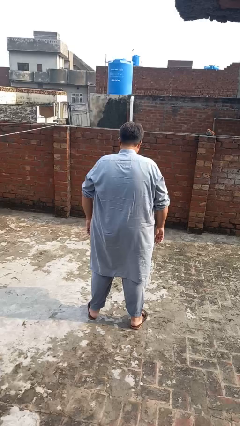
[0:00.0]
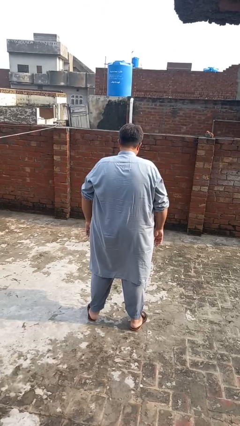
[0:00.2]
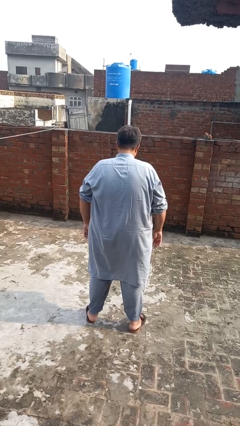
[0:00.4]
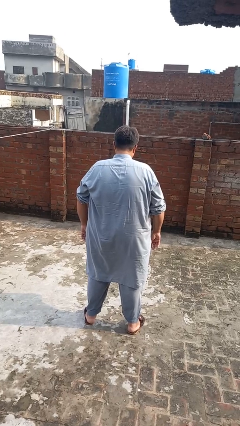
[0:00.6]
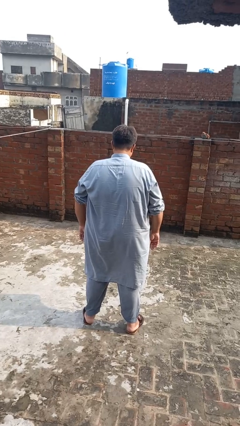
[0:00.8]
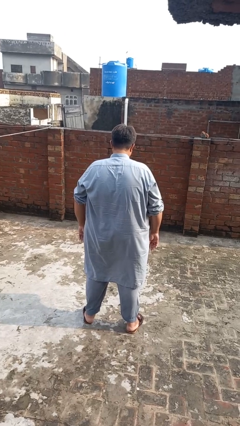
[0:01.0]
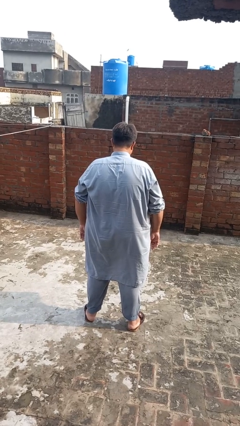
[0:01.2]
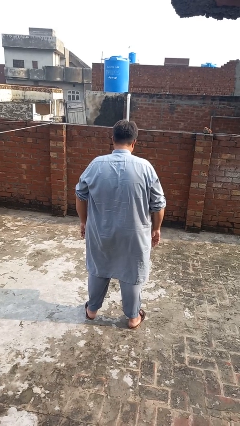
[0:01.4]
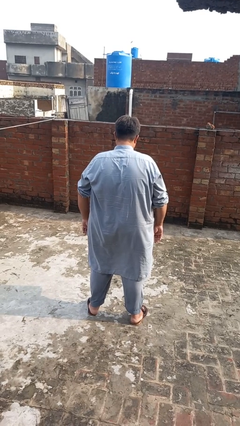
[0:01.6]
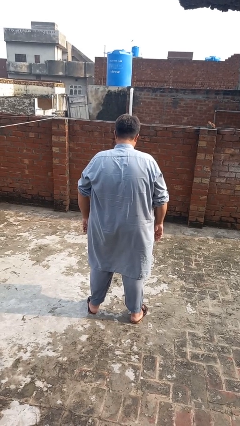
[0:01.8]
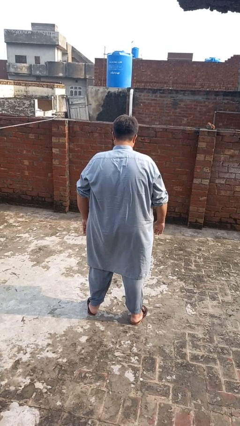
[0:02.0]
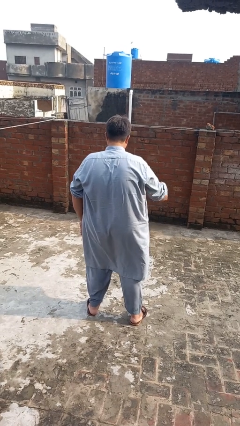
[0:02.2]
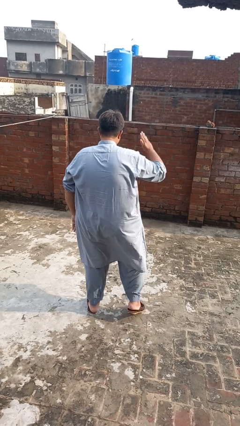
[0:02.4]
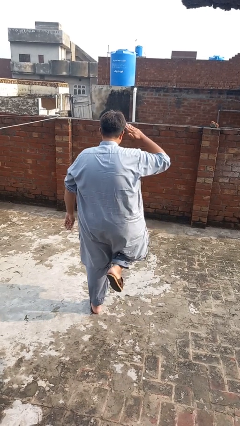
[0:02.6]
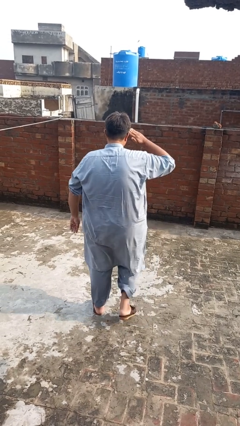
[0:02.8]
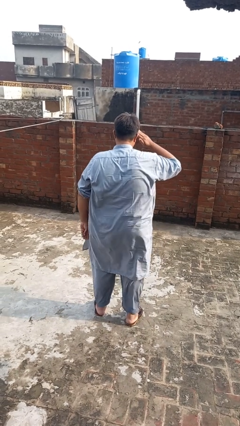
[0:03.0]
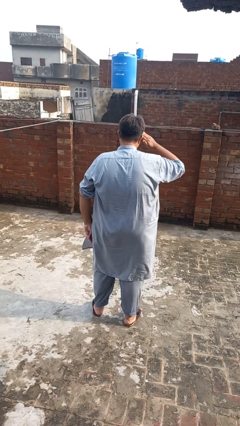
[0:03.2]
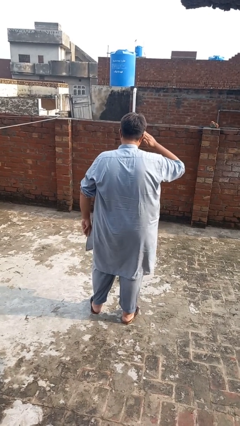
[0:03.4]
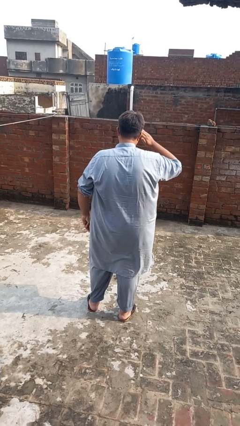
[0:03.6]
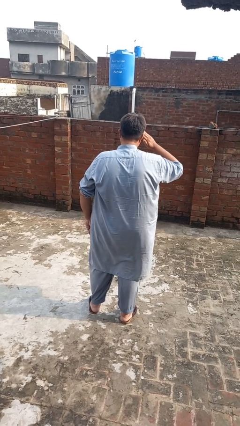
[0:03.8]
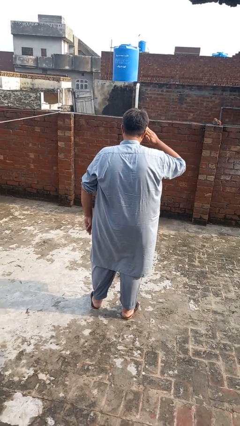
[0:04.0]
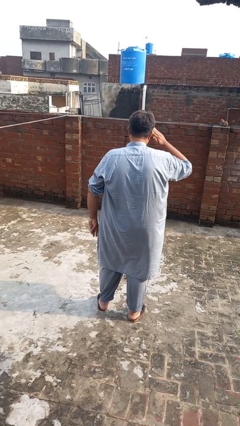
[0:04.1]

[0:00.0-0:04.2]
person salutes

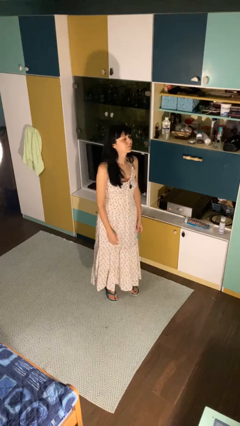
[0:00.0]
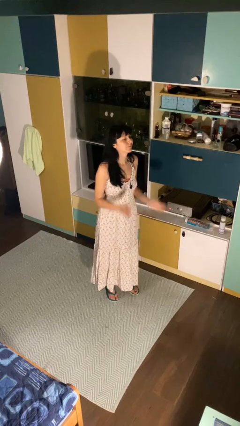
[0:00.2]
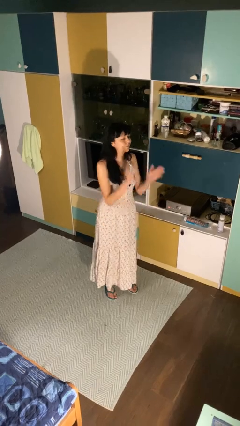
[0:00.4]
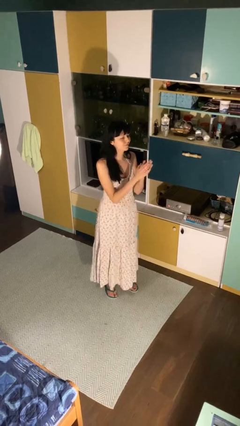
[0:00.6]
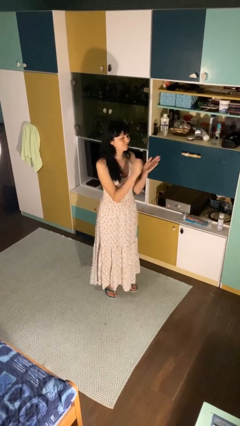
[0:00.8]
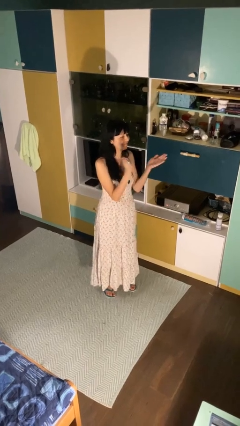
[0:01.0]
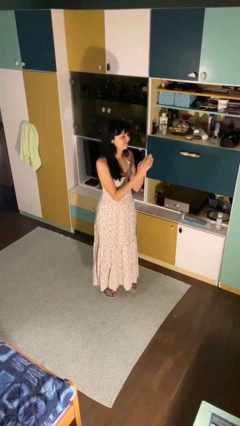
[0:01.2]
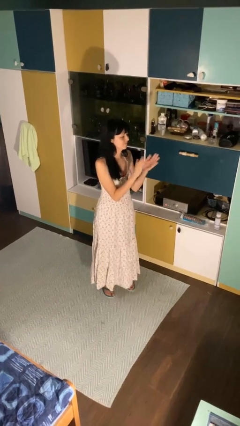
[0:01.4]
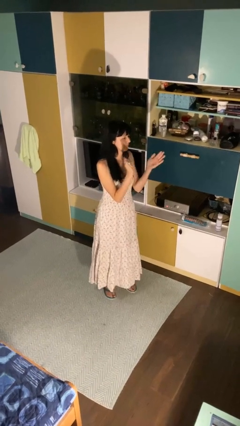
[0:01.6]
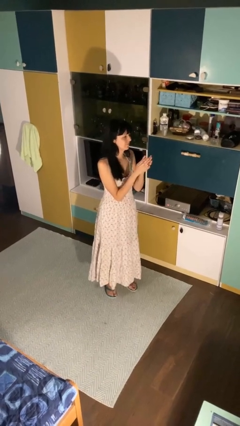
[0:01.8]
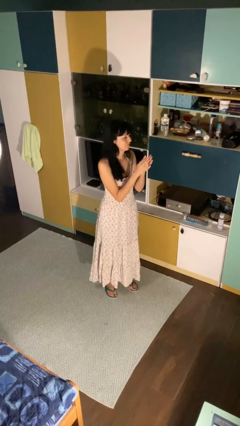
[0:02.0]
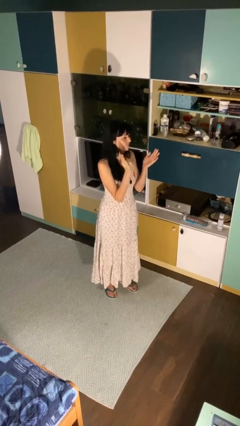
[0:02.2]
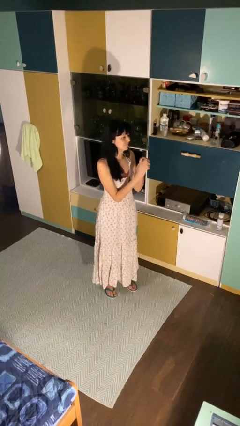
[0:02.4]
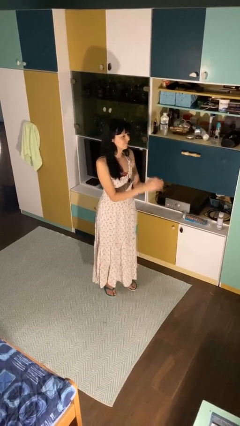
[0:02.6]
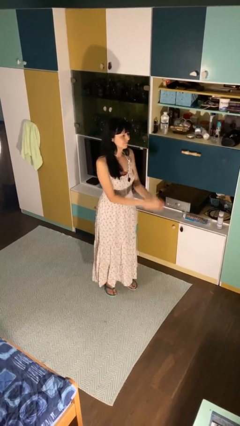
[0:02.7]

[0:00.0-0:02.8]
person claps hands

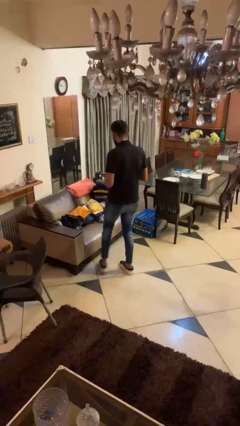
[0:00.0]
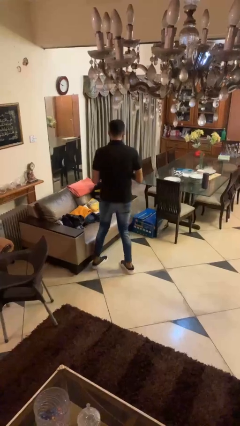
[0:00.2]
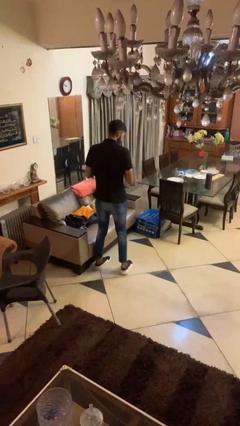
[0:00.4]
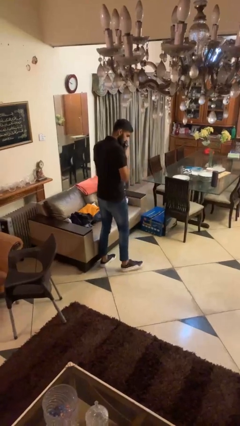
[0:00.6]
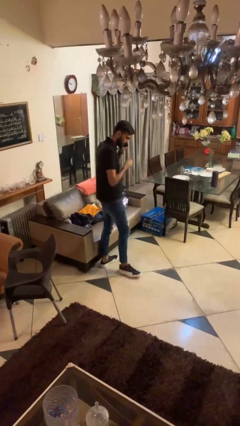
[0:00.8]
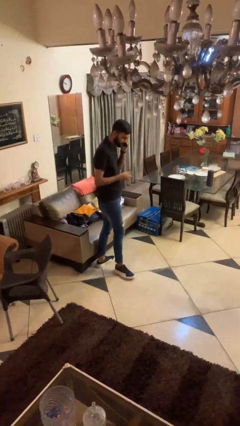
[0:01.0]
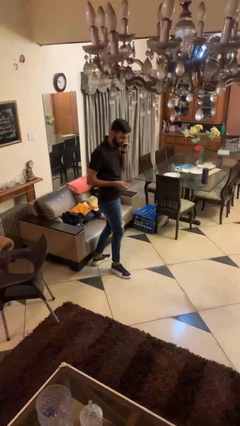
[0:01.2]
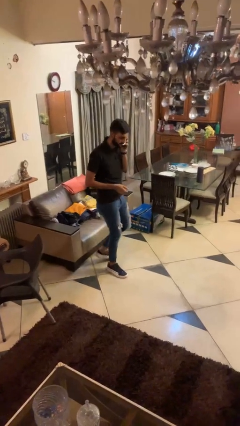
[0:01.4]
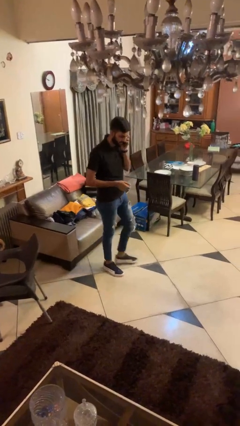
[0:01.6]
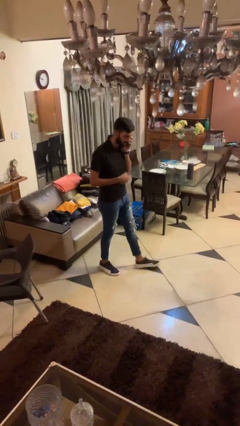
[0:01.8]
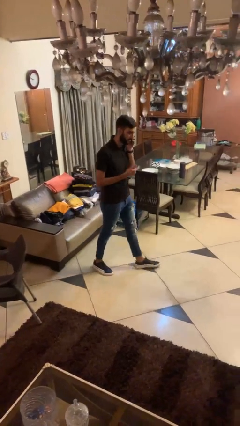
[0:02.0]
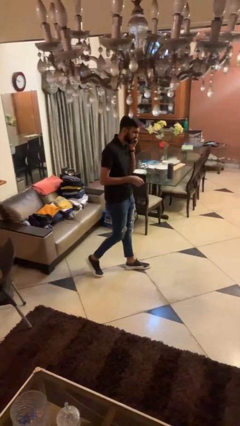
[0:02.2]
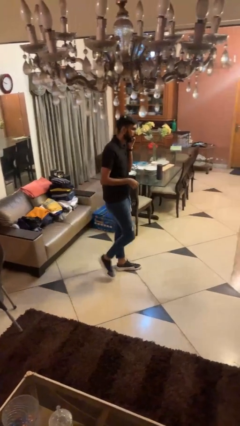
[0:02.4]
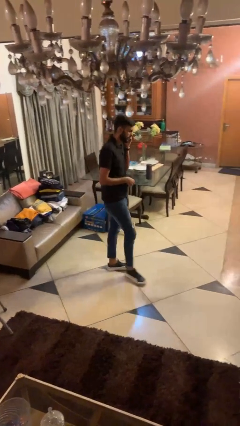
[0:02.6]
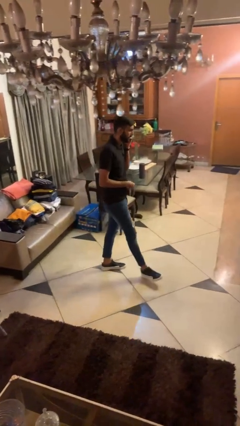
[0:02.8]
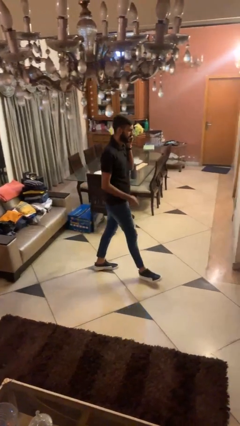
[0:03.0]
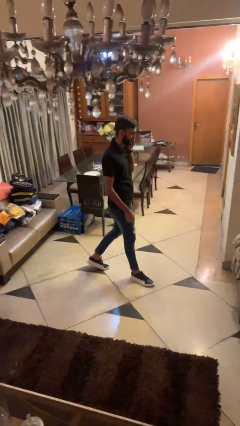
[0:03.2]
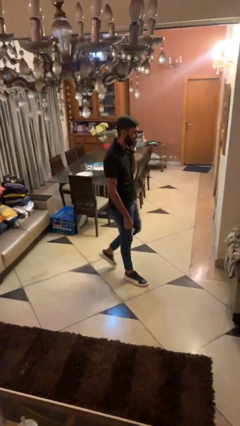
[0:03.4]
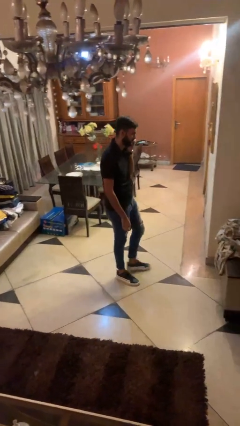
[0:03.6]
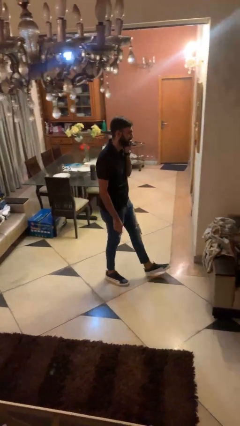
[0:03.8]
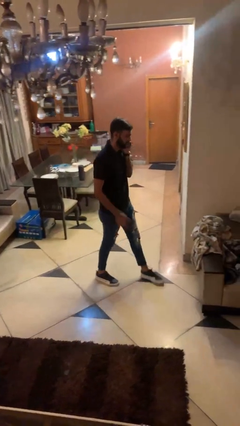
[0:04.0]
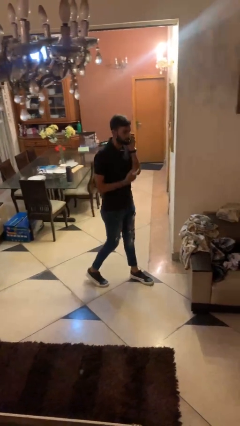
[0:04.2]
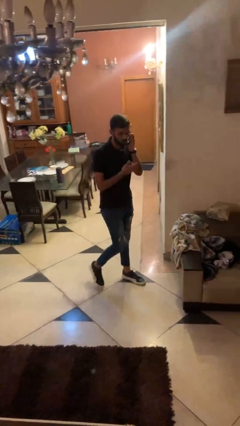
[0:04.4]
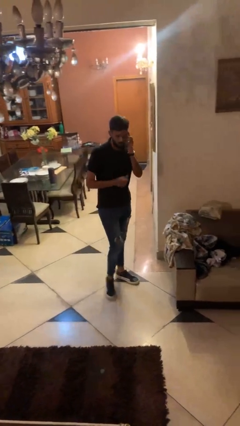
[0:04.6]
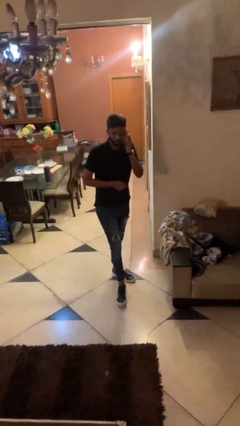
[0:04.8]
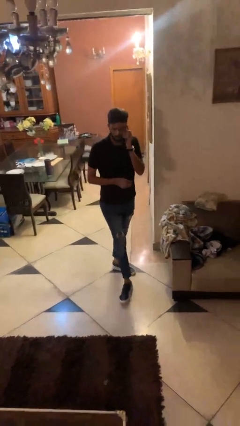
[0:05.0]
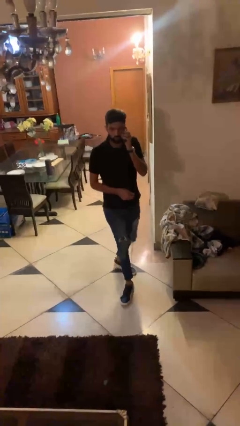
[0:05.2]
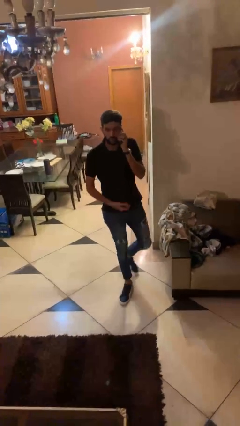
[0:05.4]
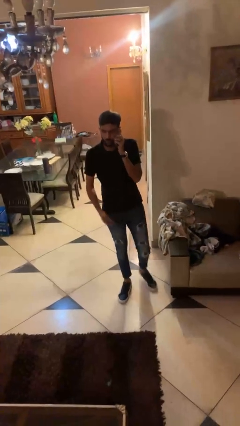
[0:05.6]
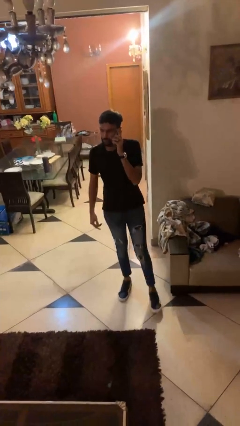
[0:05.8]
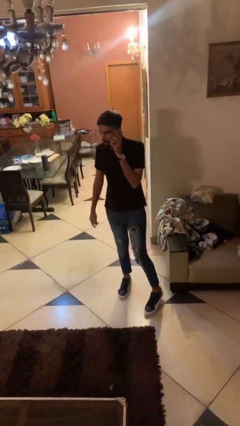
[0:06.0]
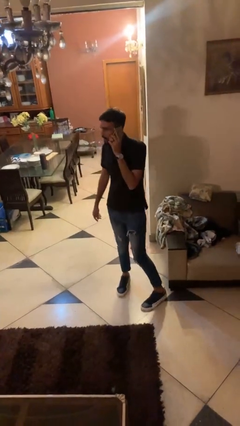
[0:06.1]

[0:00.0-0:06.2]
person talks on phone

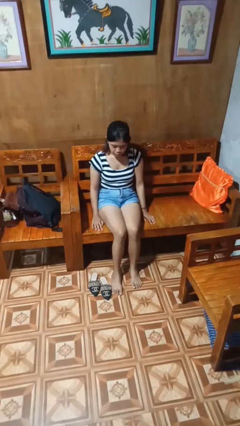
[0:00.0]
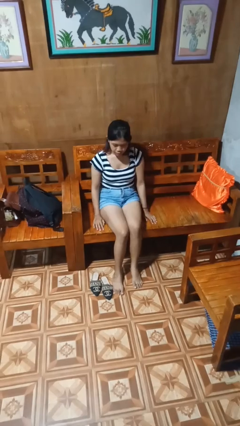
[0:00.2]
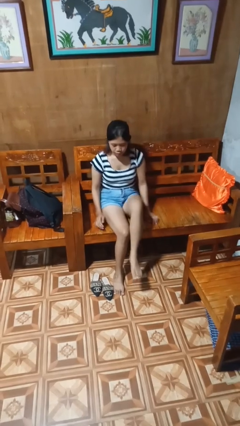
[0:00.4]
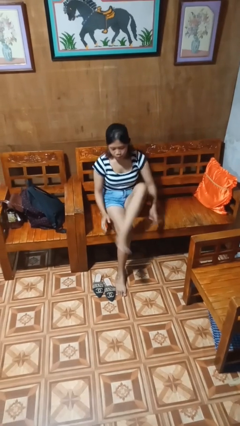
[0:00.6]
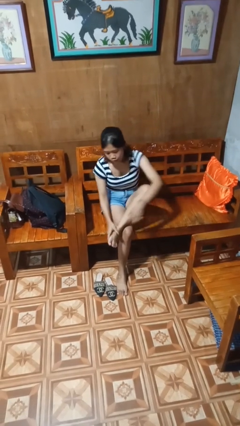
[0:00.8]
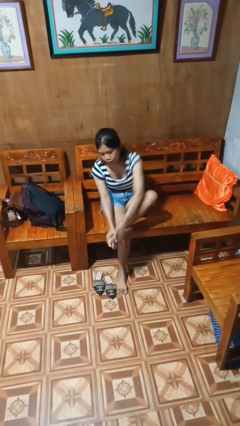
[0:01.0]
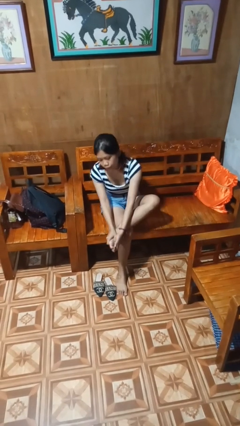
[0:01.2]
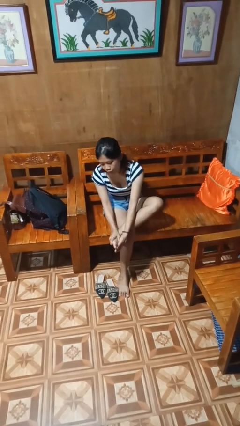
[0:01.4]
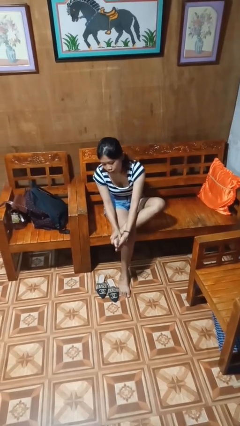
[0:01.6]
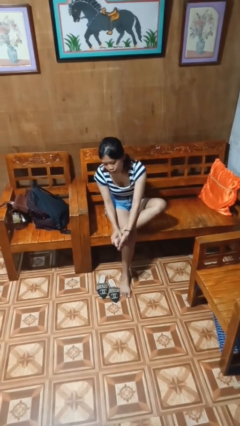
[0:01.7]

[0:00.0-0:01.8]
person rubs foot

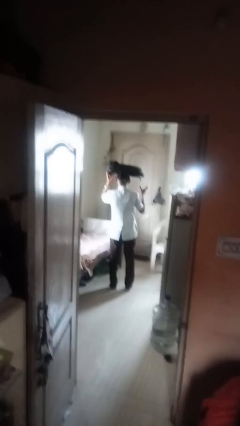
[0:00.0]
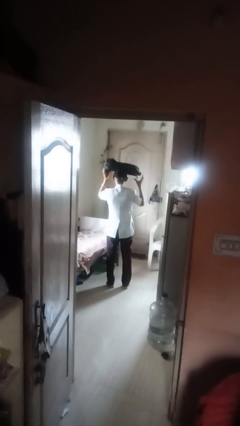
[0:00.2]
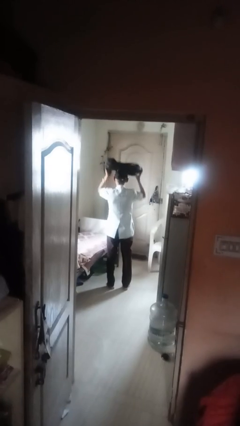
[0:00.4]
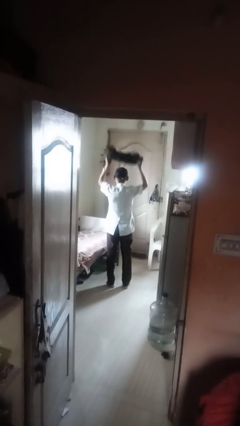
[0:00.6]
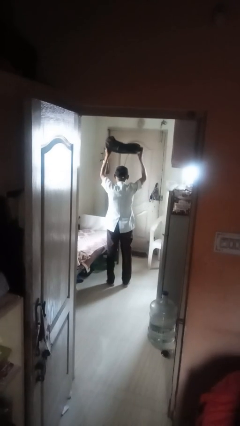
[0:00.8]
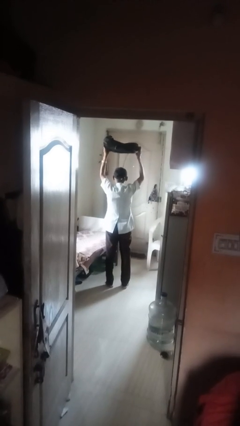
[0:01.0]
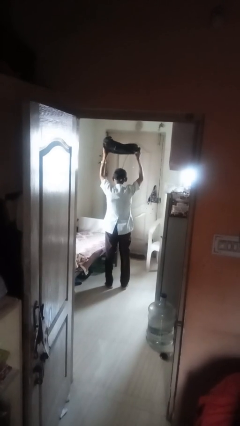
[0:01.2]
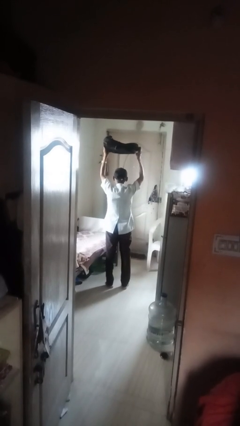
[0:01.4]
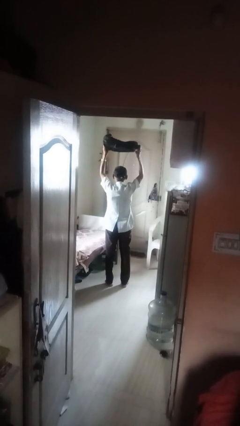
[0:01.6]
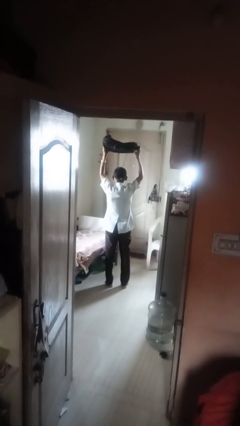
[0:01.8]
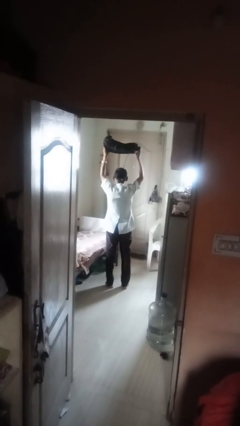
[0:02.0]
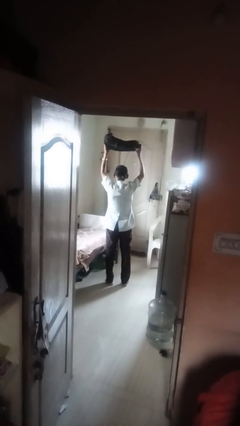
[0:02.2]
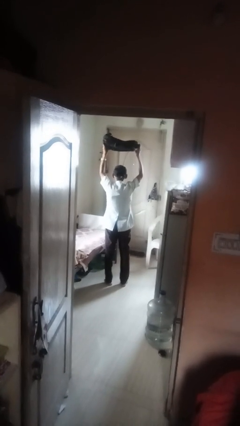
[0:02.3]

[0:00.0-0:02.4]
person holds object above head

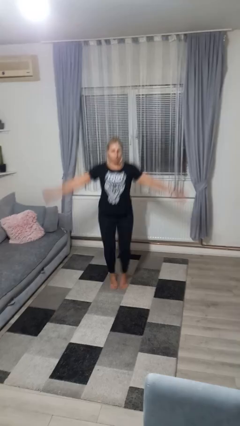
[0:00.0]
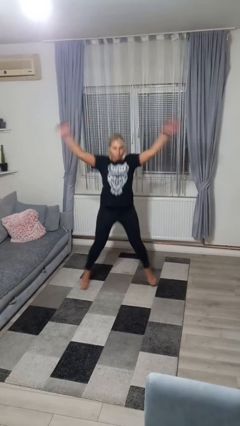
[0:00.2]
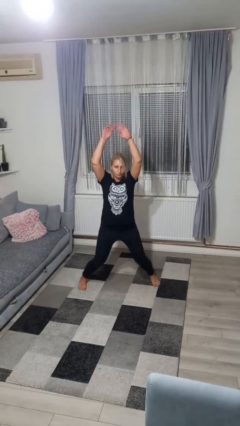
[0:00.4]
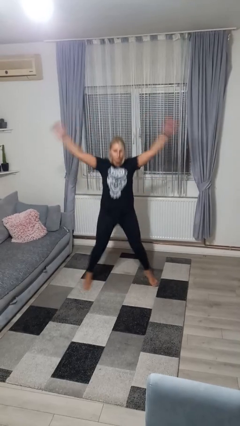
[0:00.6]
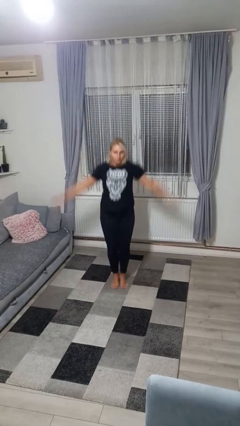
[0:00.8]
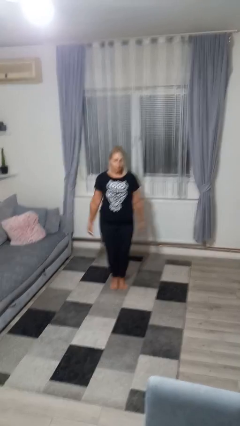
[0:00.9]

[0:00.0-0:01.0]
person exercises with jumping jacks
